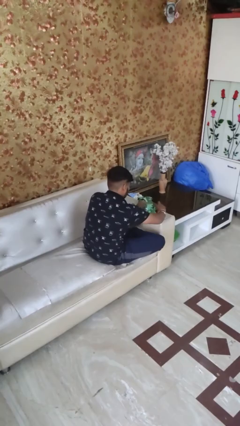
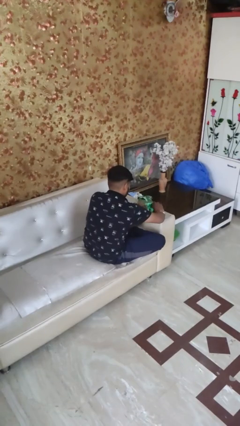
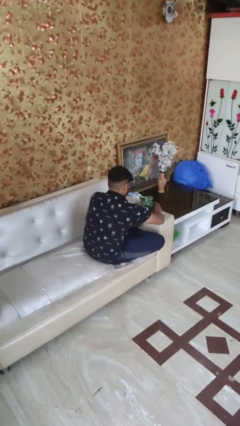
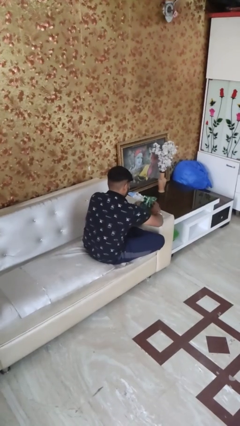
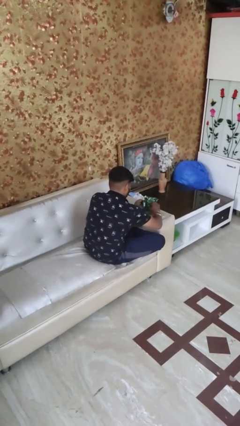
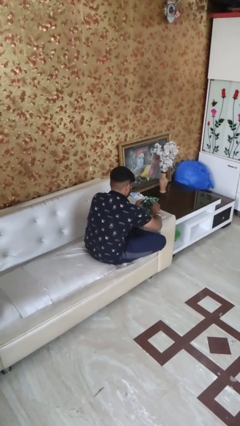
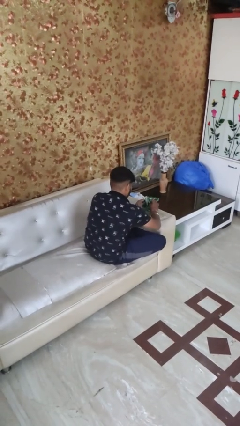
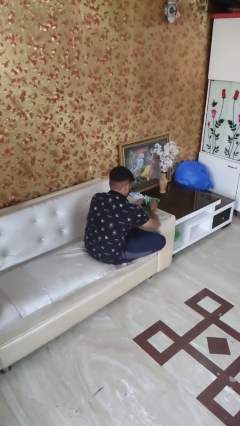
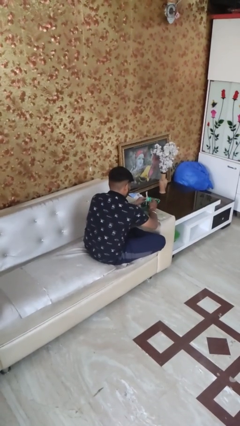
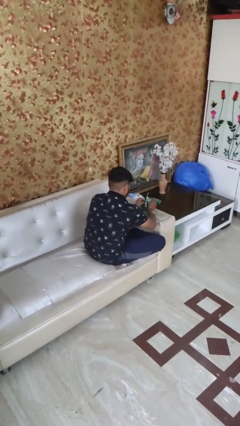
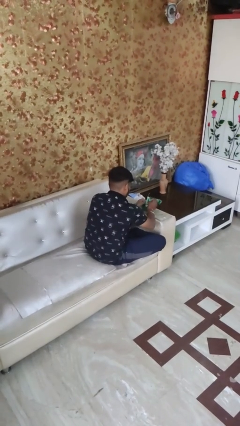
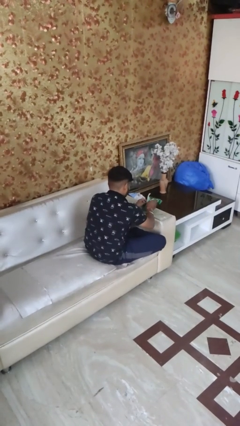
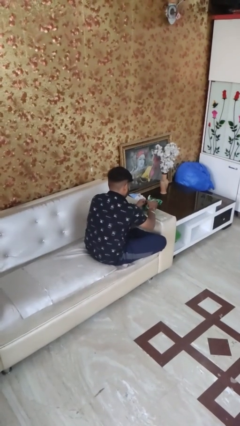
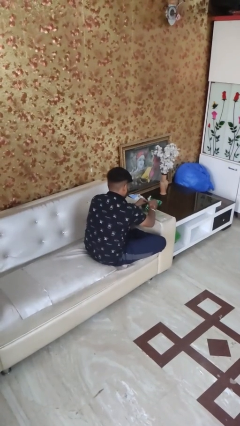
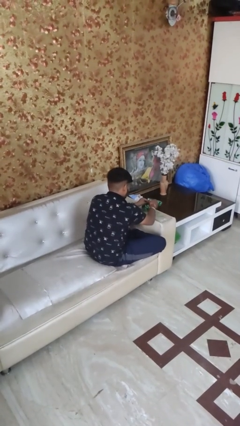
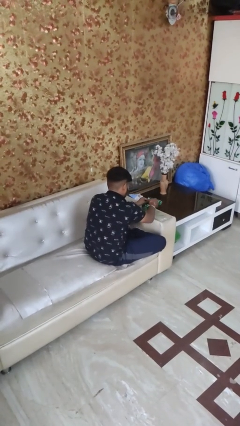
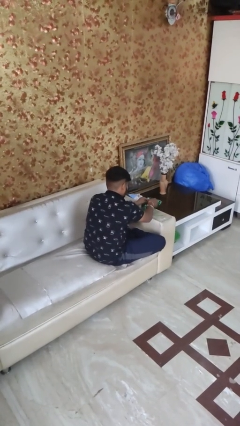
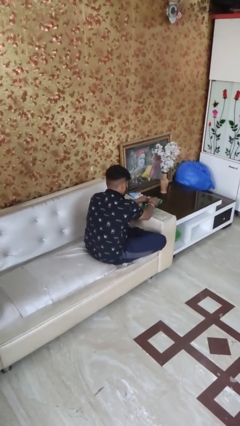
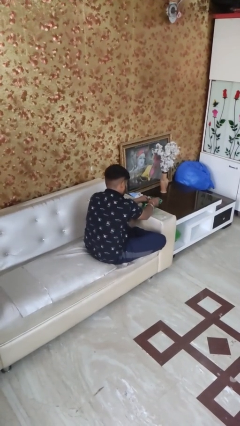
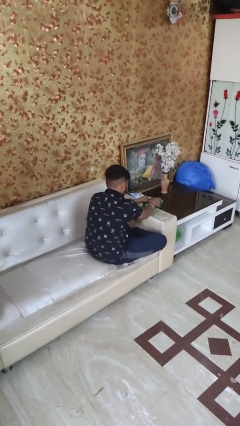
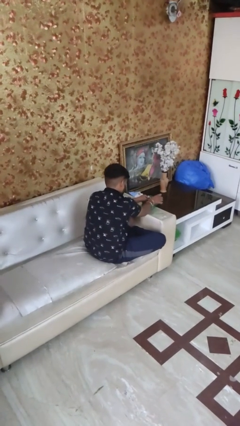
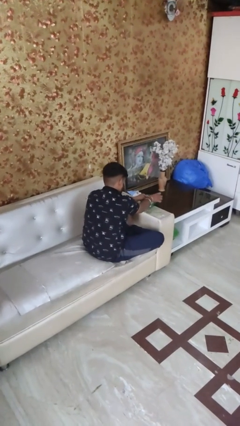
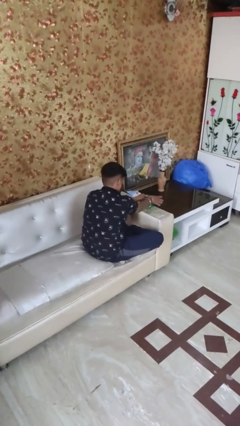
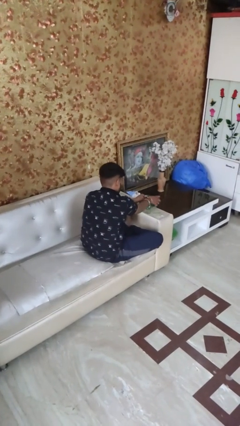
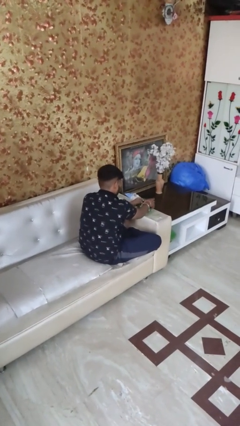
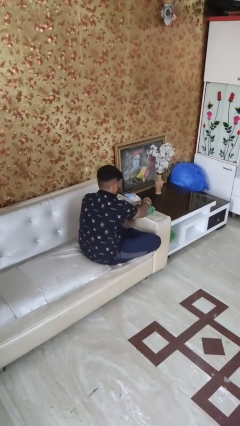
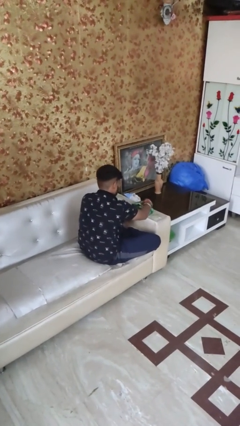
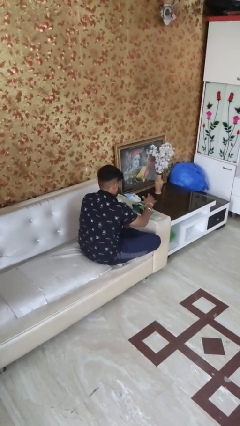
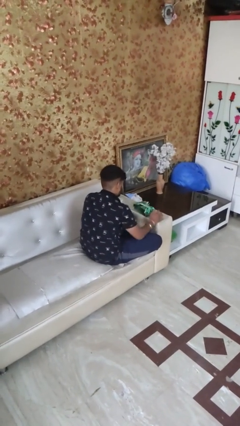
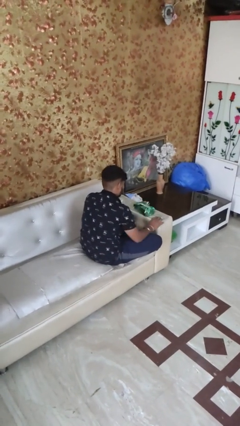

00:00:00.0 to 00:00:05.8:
person wraps box

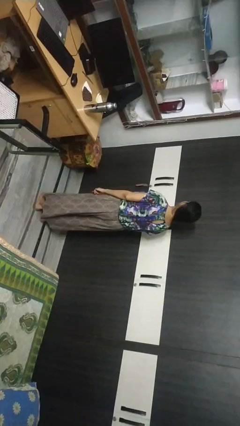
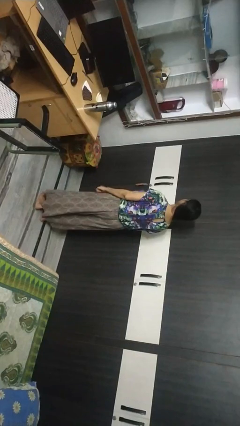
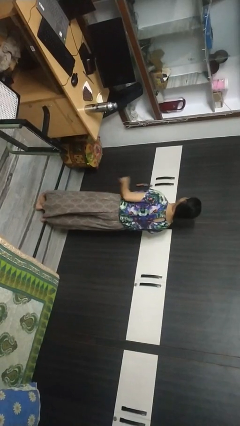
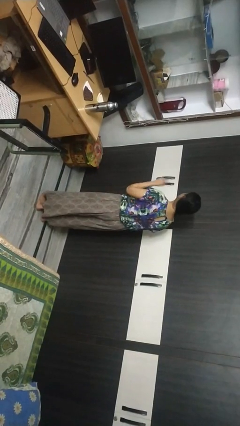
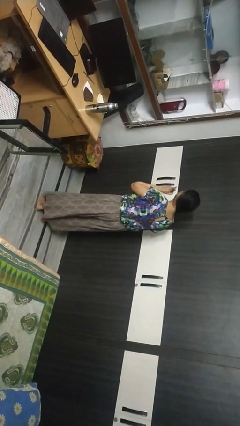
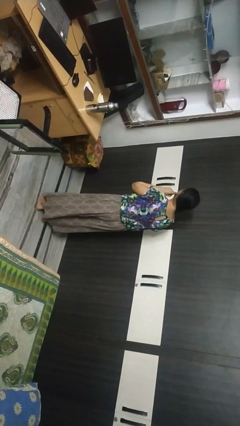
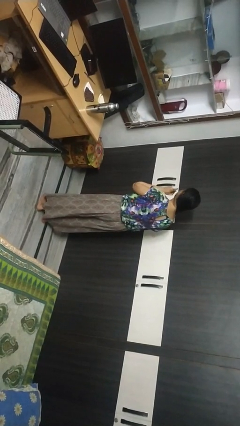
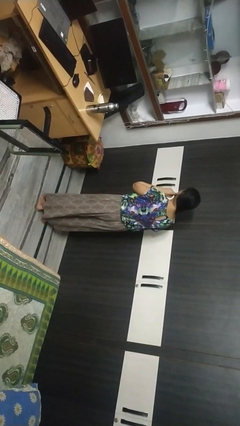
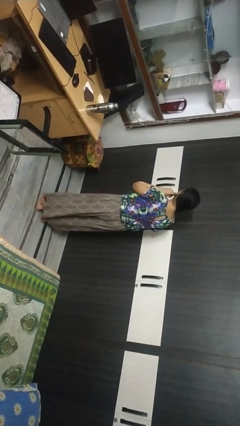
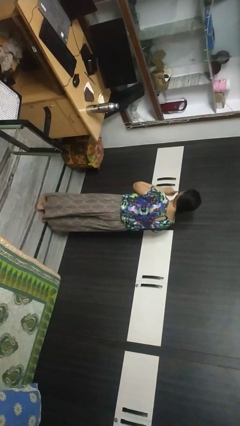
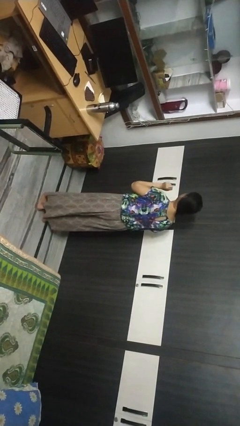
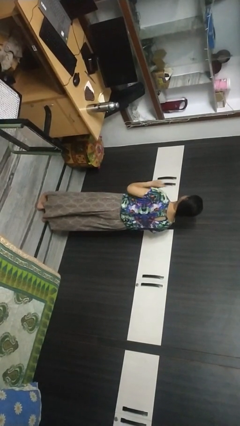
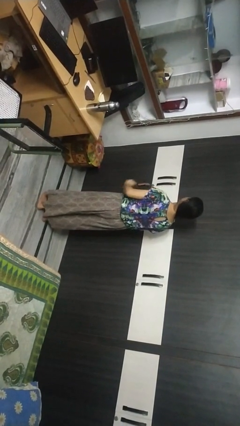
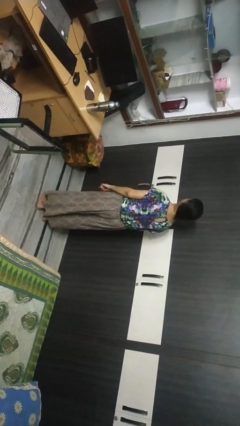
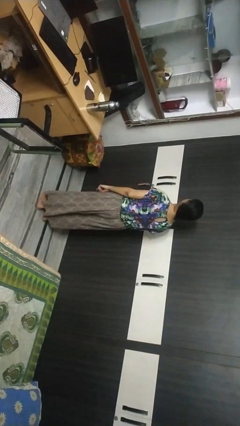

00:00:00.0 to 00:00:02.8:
person gestures listen closely

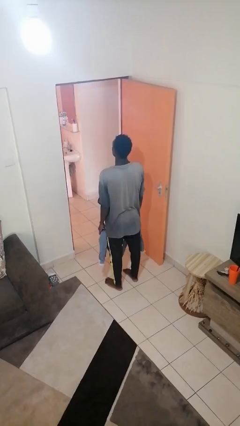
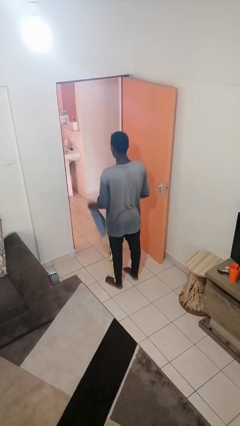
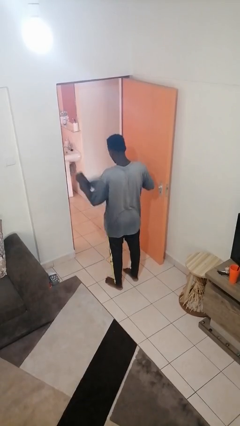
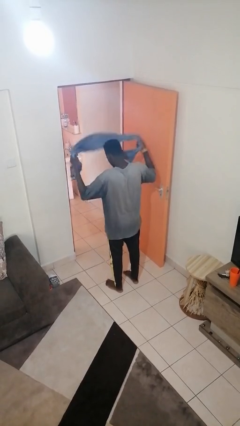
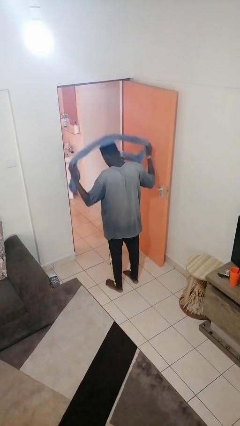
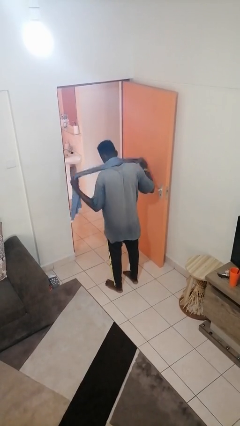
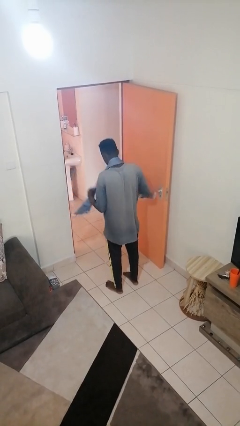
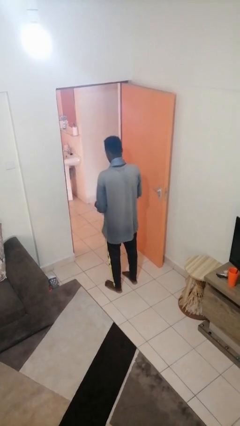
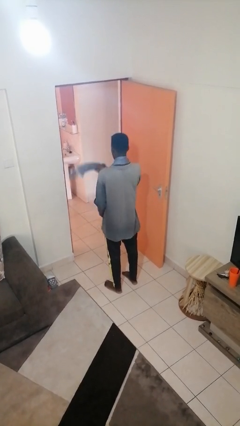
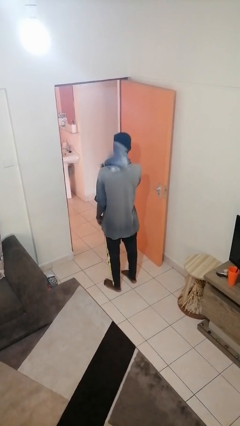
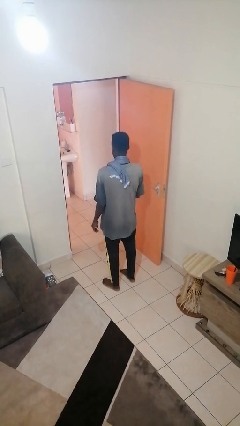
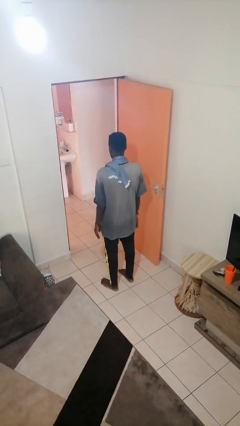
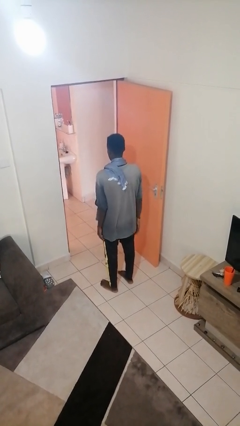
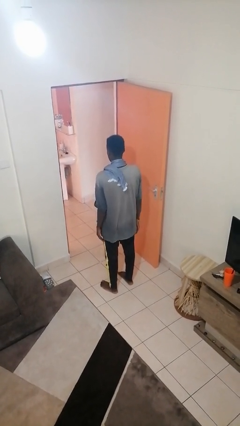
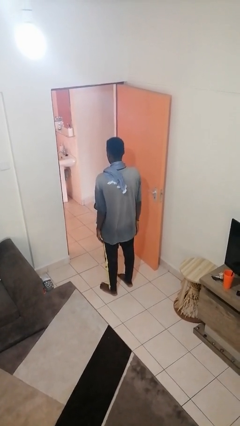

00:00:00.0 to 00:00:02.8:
person puts on scarf

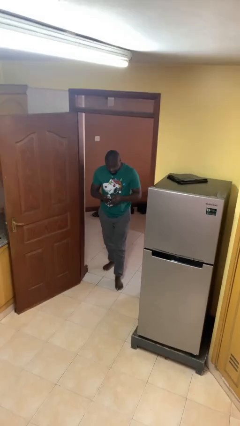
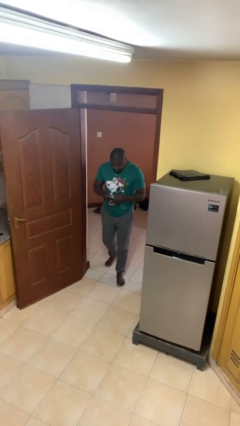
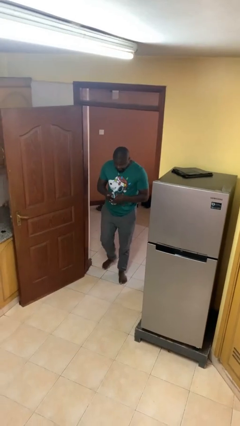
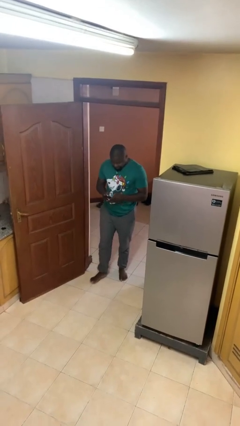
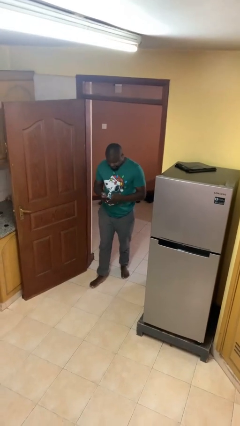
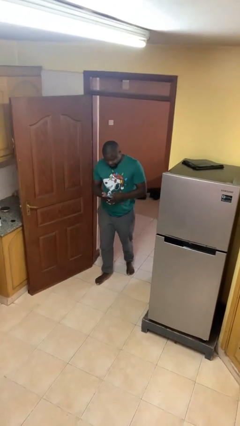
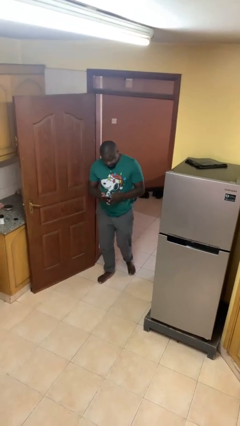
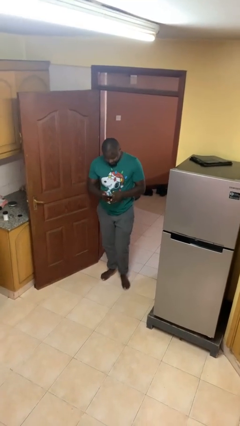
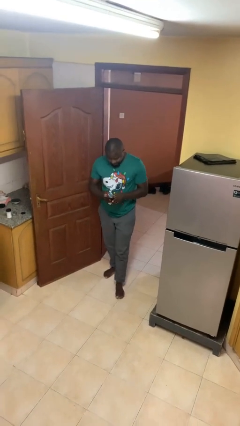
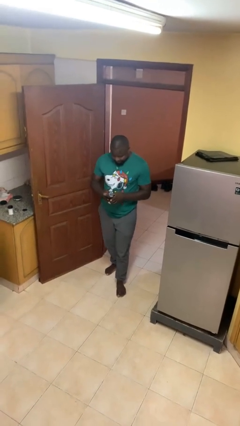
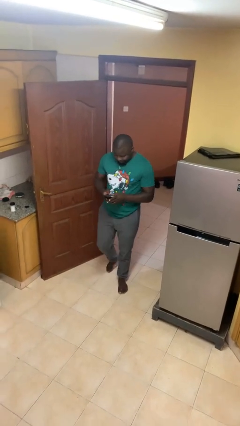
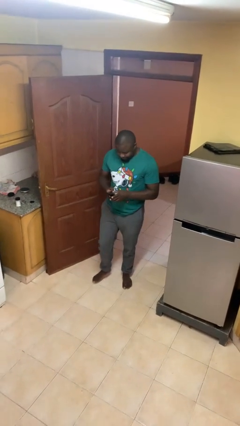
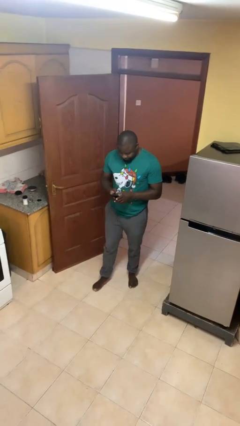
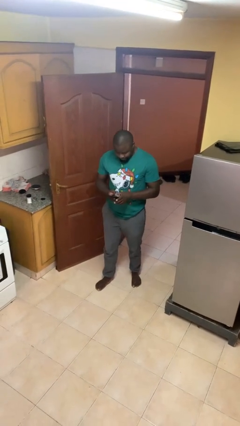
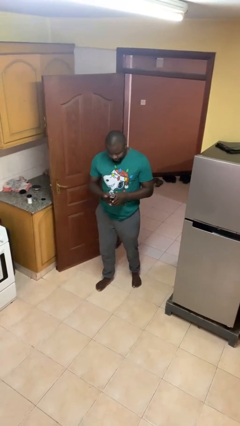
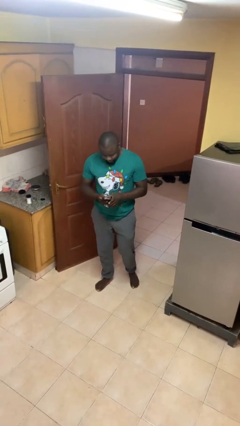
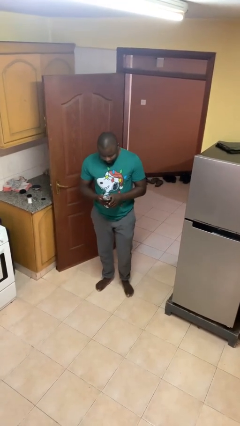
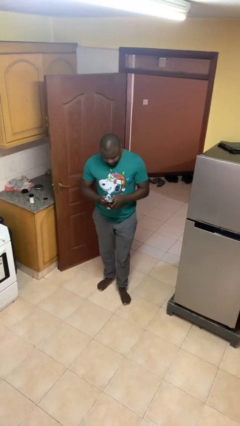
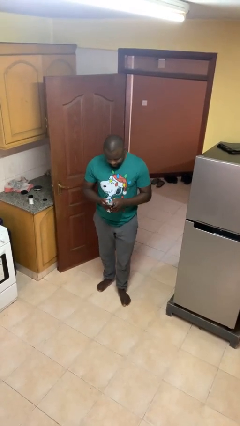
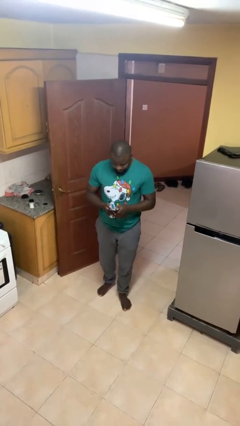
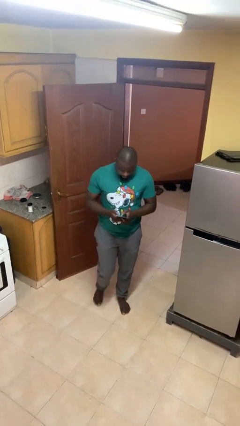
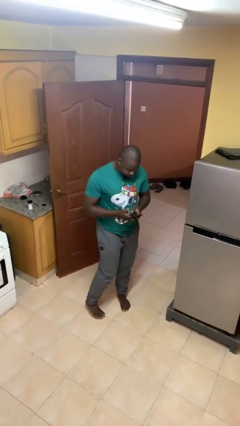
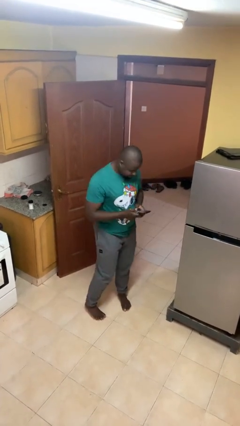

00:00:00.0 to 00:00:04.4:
person enters scene through structure

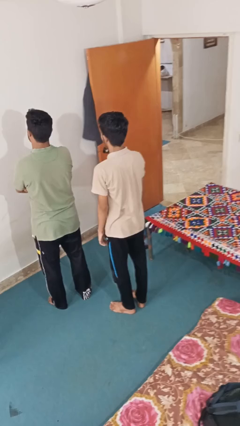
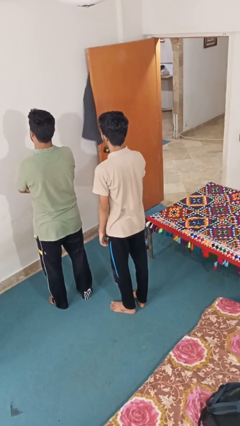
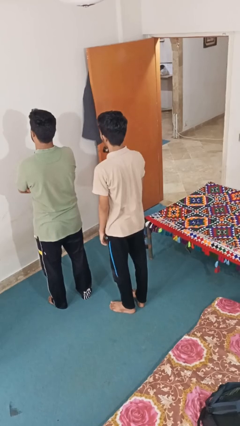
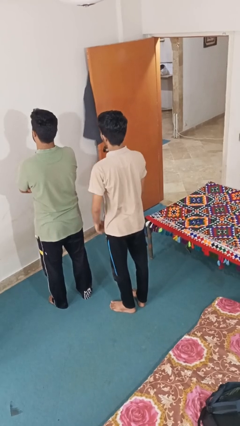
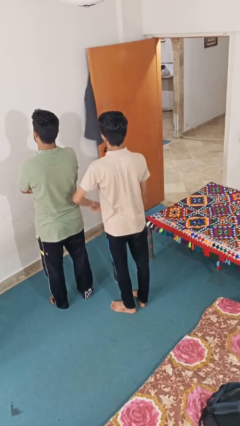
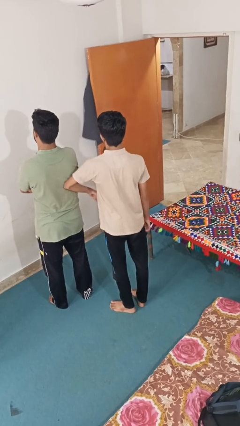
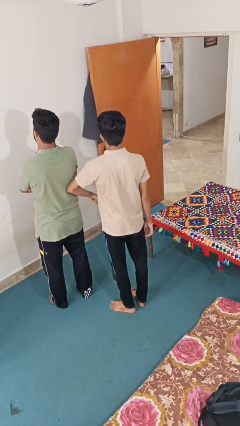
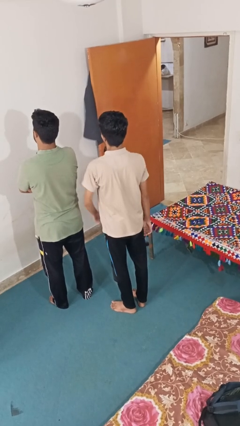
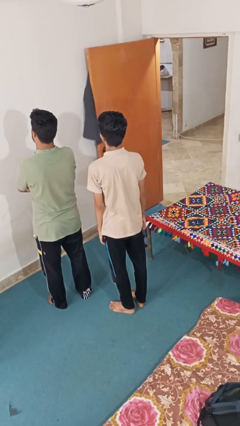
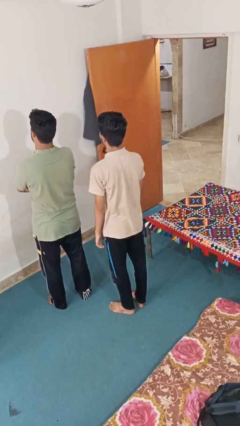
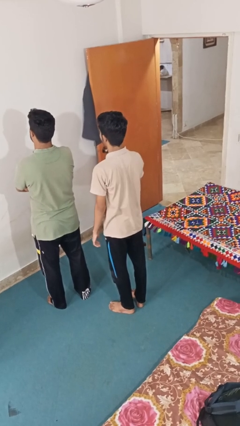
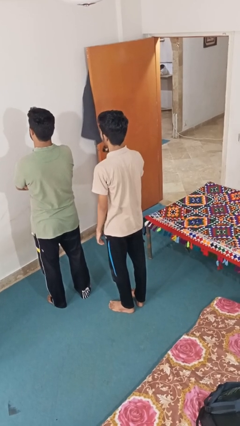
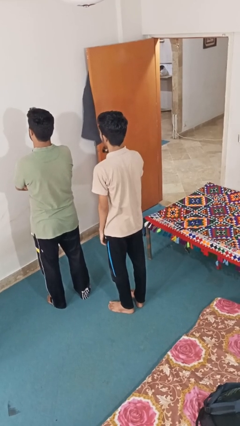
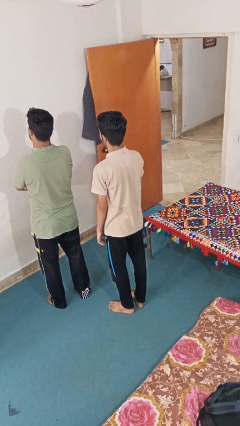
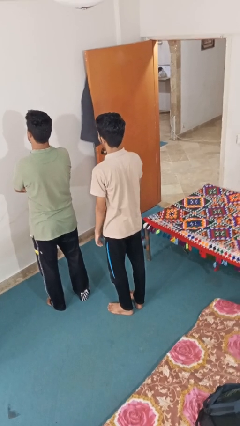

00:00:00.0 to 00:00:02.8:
person nudges person with elbow
